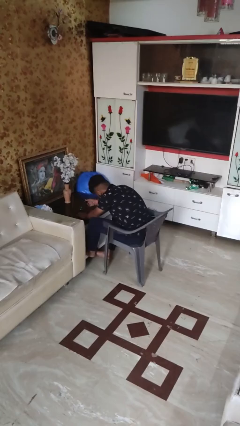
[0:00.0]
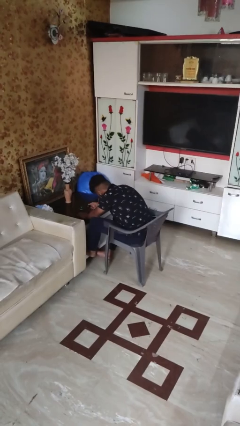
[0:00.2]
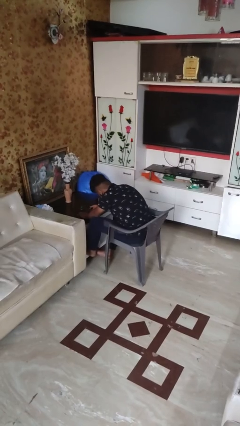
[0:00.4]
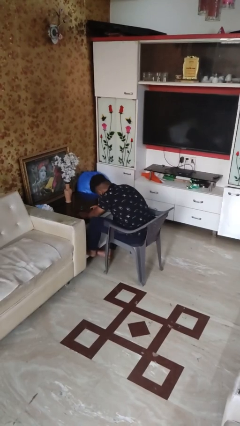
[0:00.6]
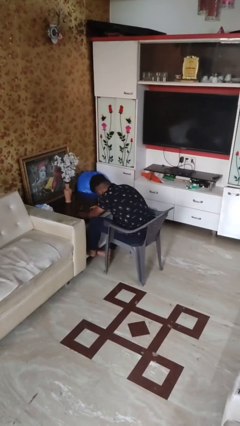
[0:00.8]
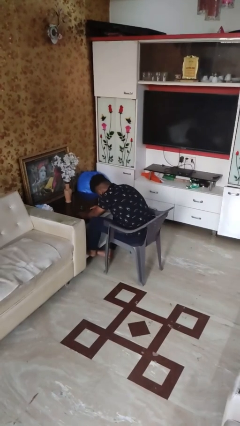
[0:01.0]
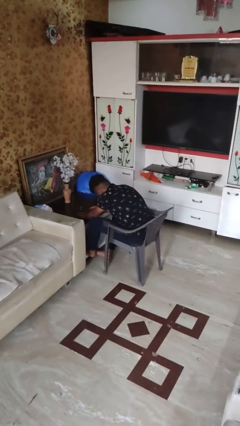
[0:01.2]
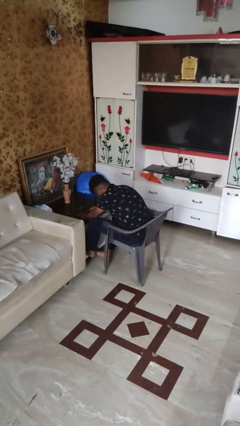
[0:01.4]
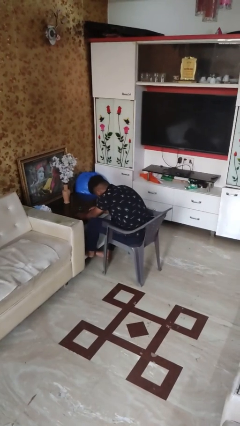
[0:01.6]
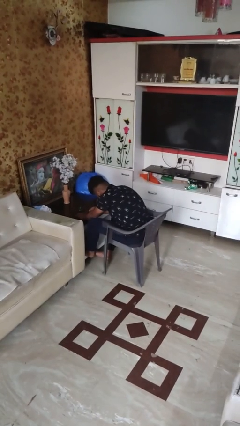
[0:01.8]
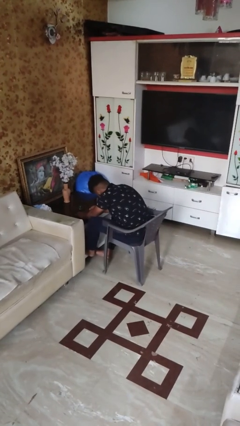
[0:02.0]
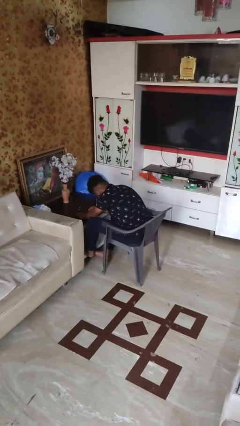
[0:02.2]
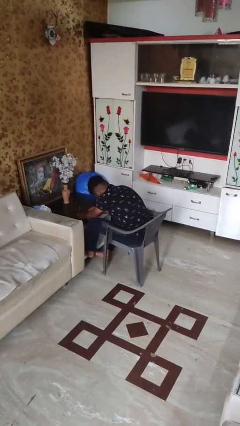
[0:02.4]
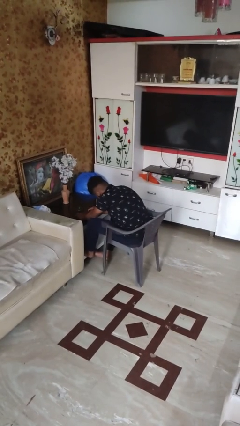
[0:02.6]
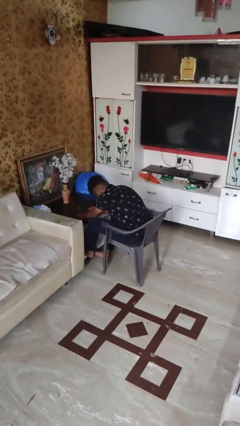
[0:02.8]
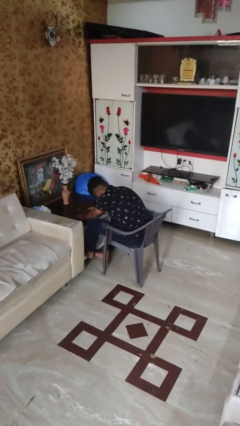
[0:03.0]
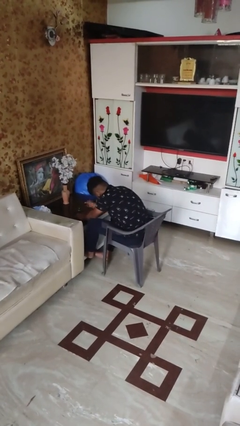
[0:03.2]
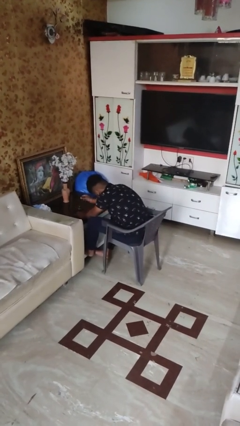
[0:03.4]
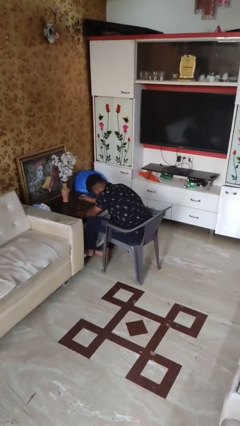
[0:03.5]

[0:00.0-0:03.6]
person paints fingernails

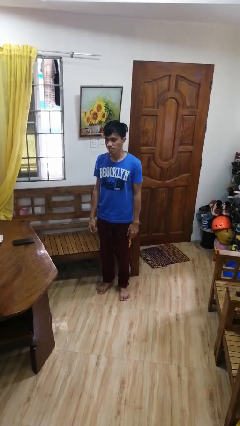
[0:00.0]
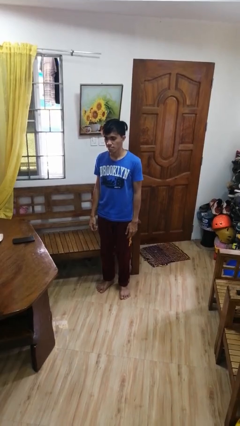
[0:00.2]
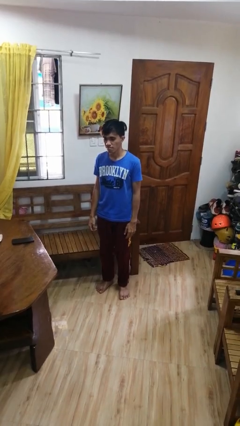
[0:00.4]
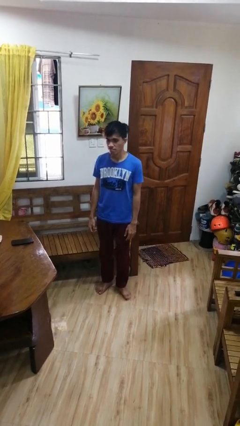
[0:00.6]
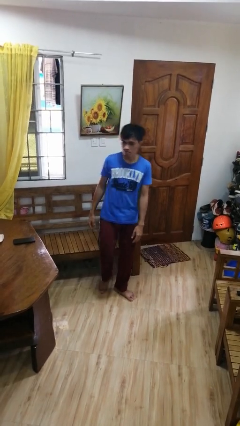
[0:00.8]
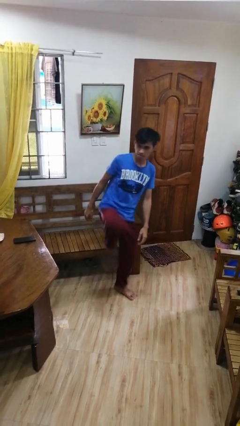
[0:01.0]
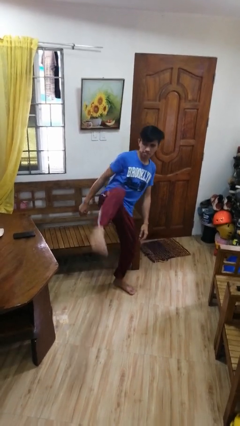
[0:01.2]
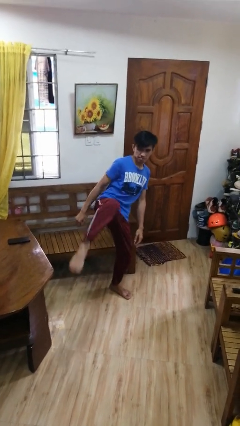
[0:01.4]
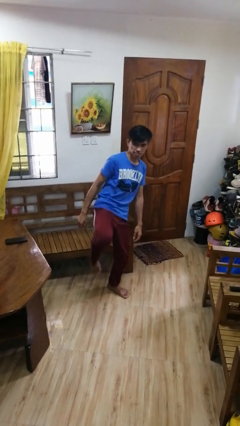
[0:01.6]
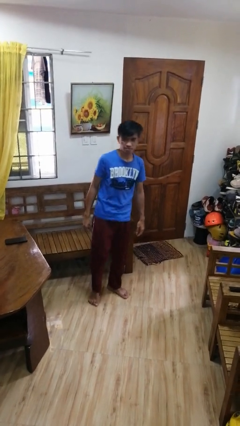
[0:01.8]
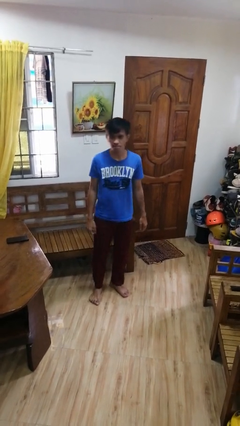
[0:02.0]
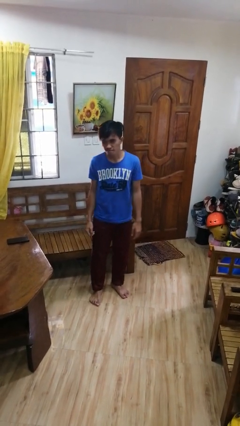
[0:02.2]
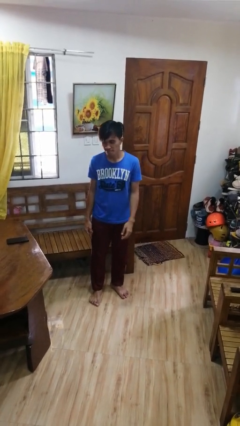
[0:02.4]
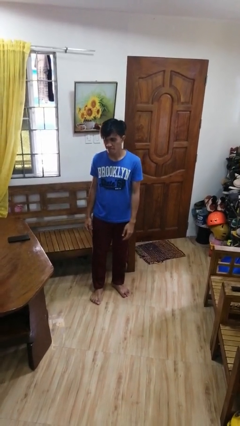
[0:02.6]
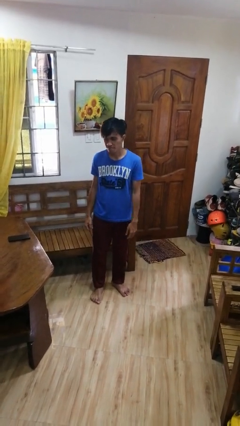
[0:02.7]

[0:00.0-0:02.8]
person karate kicks

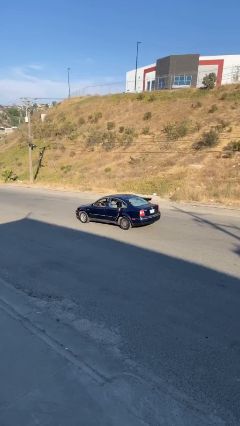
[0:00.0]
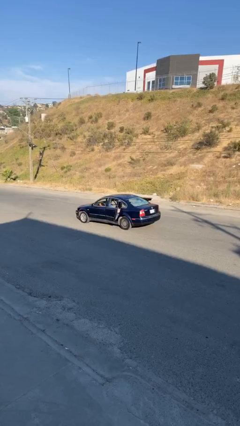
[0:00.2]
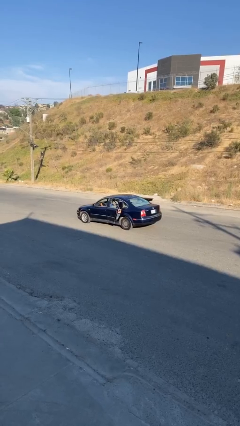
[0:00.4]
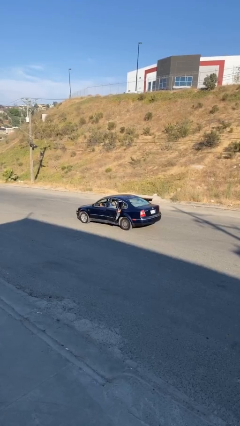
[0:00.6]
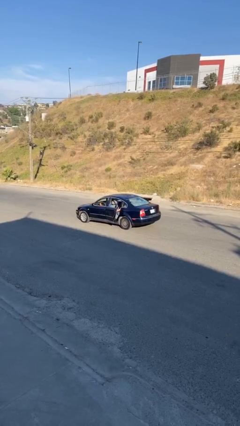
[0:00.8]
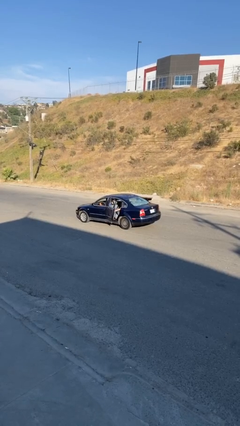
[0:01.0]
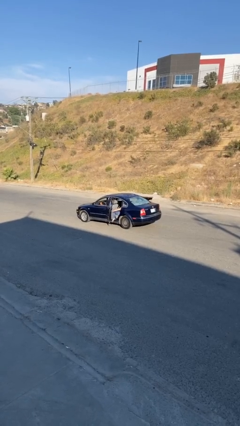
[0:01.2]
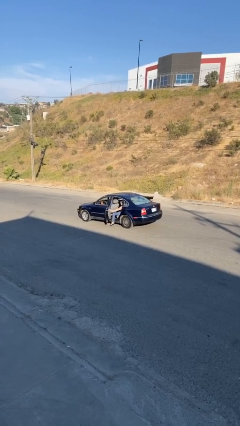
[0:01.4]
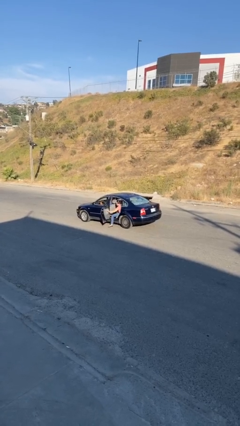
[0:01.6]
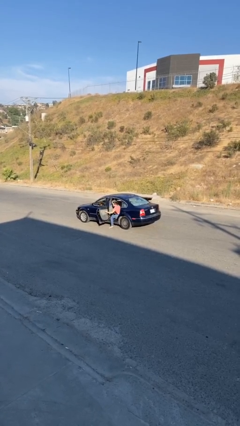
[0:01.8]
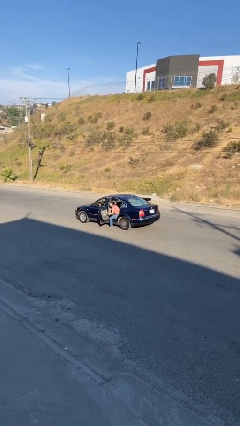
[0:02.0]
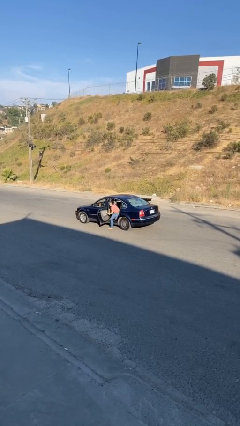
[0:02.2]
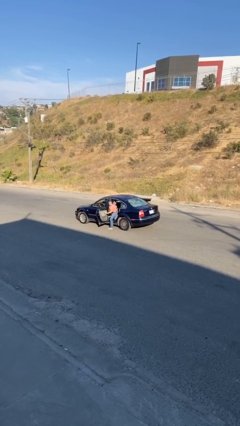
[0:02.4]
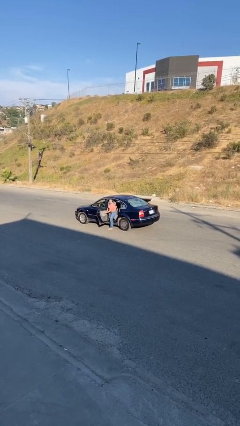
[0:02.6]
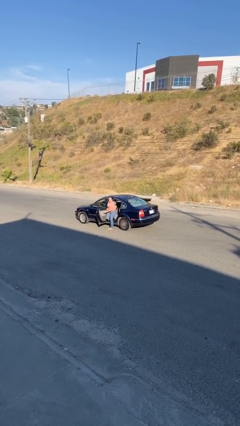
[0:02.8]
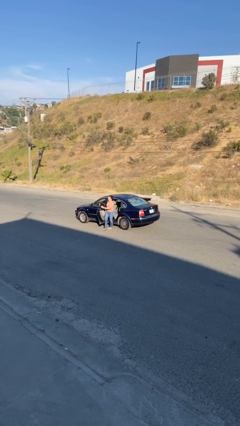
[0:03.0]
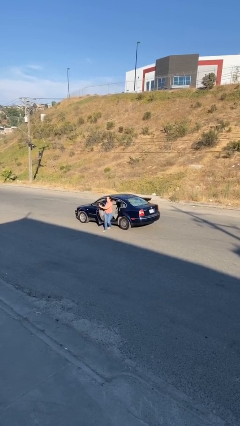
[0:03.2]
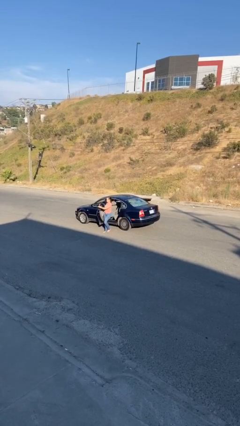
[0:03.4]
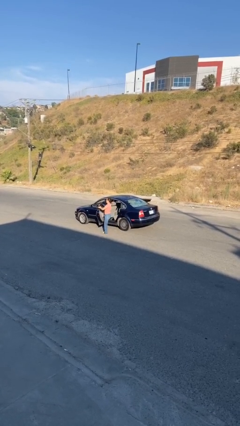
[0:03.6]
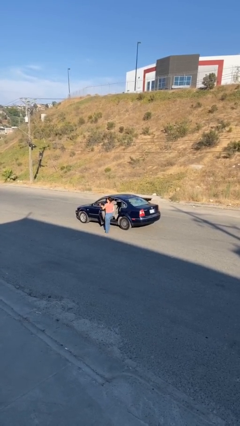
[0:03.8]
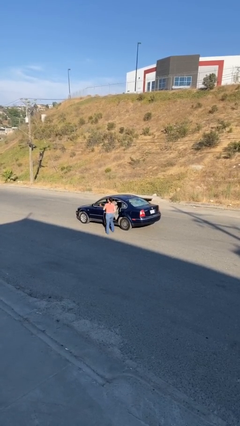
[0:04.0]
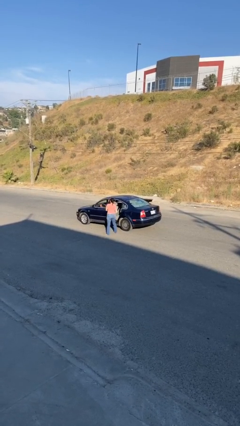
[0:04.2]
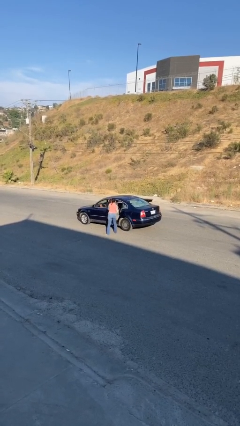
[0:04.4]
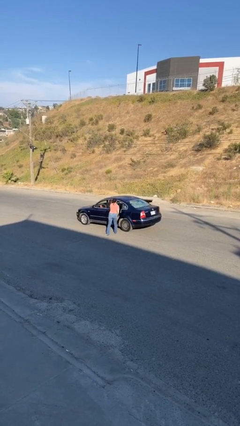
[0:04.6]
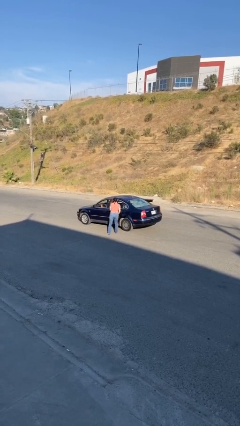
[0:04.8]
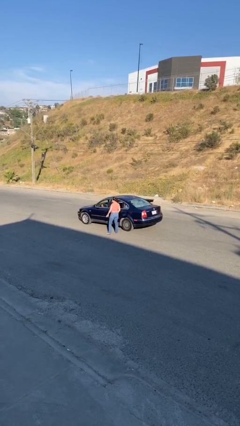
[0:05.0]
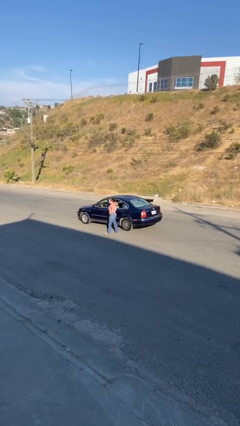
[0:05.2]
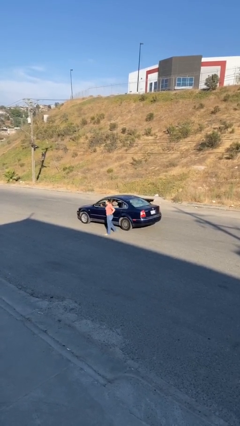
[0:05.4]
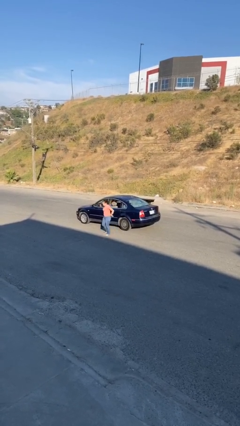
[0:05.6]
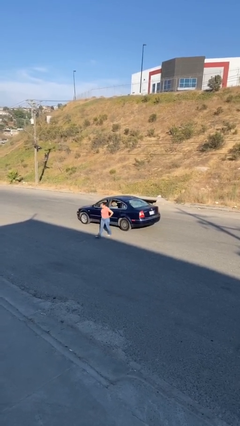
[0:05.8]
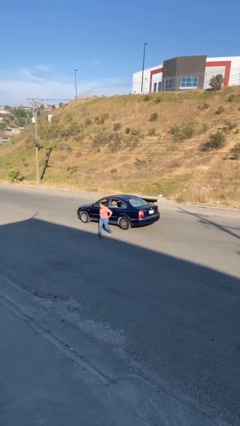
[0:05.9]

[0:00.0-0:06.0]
car drops off person

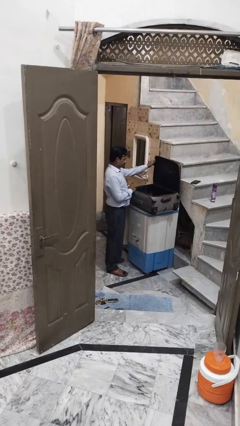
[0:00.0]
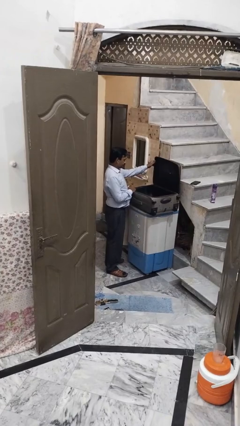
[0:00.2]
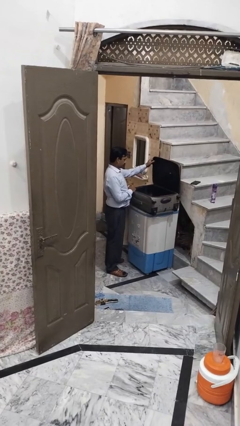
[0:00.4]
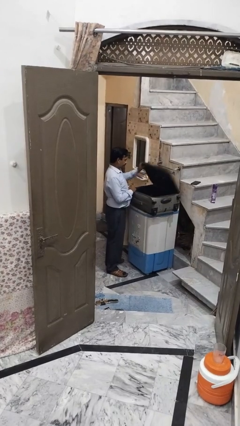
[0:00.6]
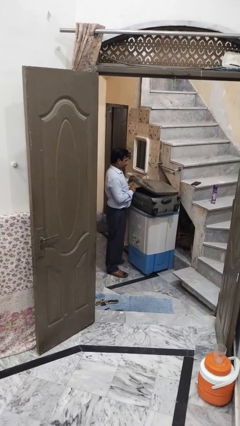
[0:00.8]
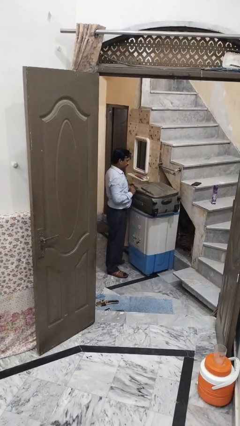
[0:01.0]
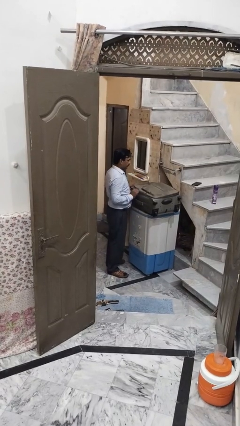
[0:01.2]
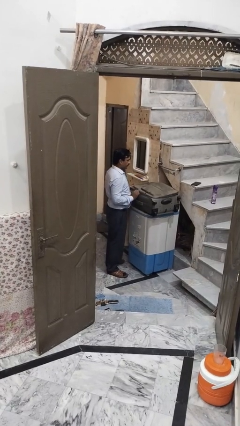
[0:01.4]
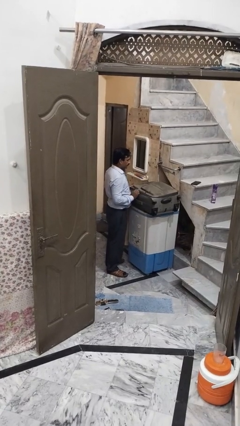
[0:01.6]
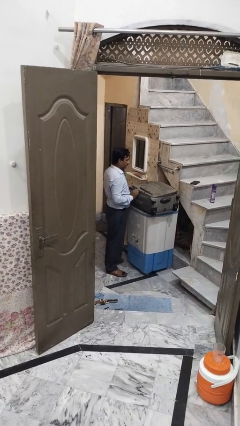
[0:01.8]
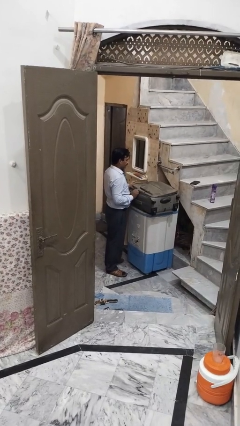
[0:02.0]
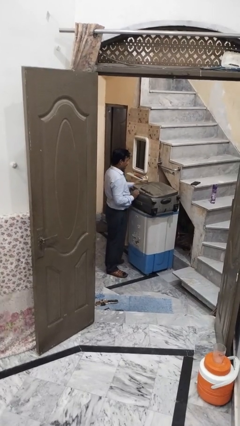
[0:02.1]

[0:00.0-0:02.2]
person closes suitcase

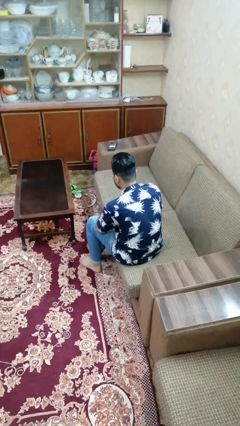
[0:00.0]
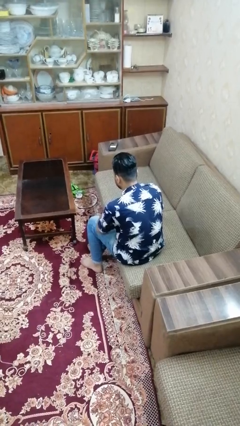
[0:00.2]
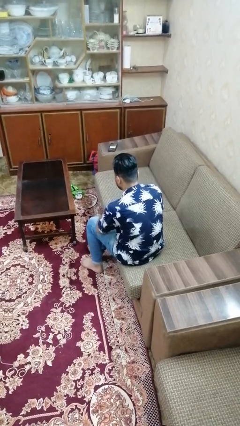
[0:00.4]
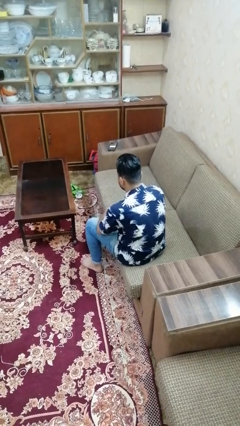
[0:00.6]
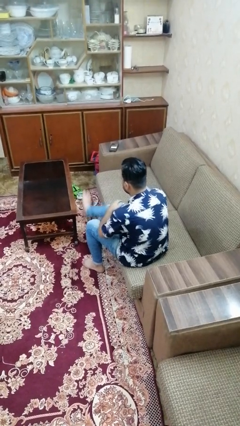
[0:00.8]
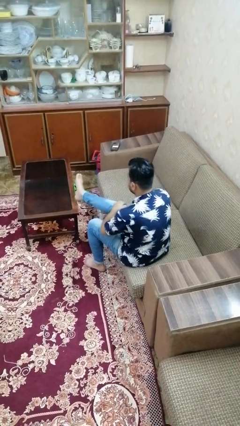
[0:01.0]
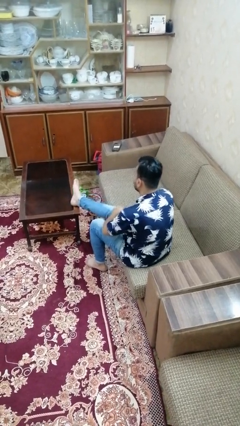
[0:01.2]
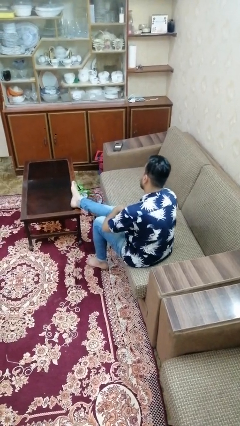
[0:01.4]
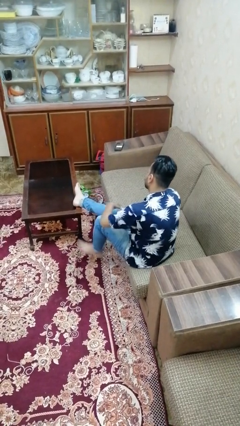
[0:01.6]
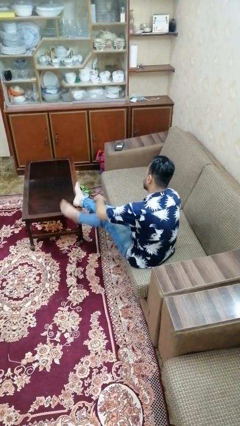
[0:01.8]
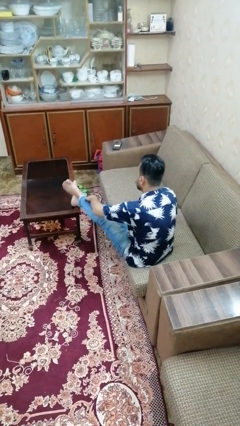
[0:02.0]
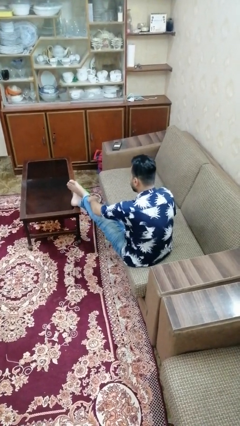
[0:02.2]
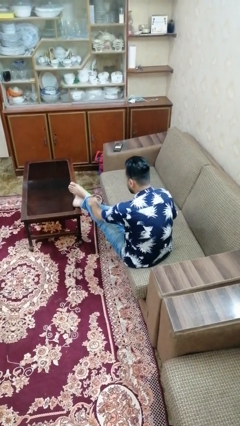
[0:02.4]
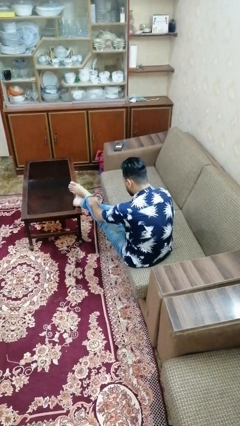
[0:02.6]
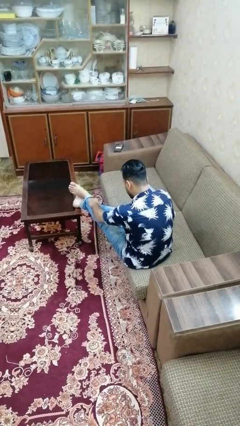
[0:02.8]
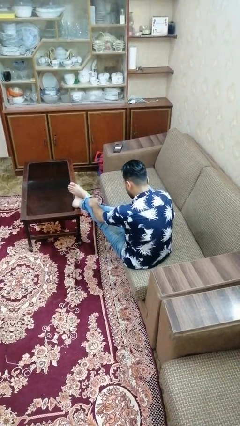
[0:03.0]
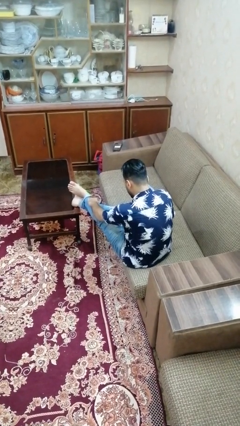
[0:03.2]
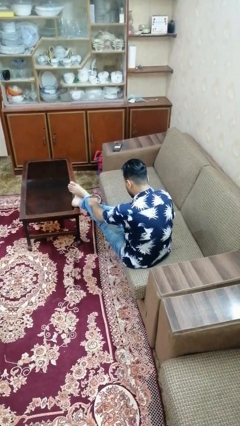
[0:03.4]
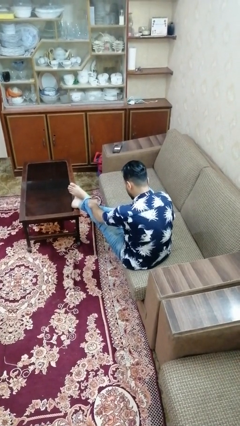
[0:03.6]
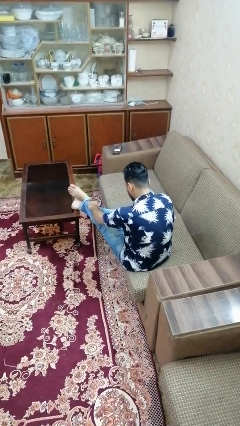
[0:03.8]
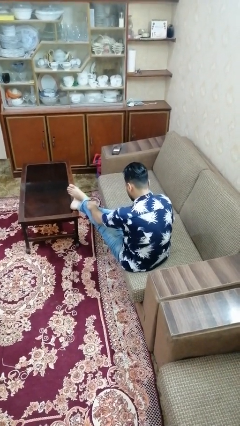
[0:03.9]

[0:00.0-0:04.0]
person puts feet up
